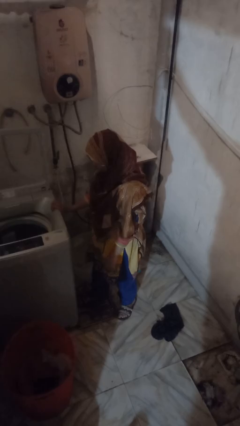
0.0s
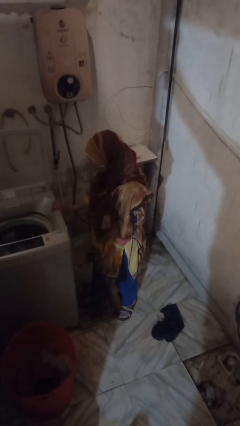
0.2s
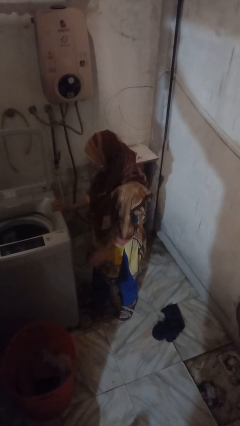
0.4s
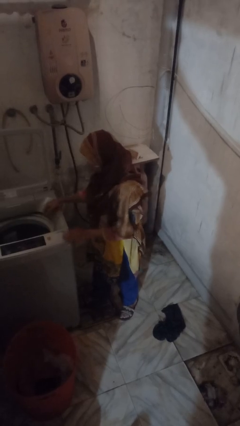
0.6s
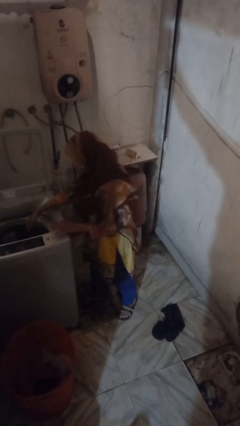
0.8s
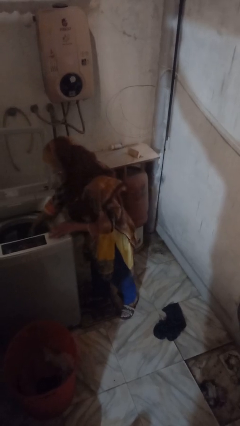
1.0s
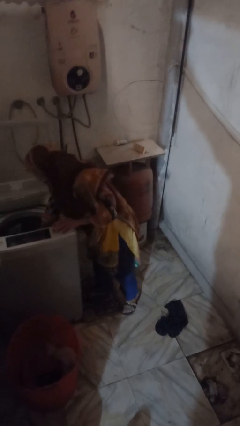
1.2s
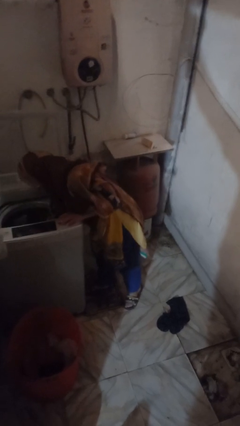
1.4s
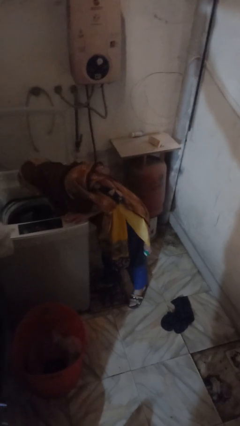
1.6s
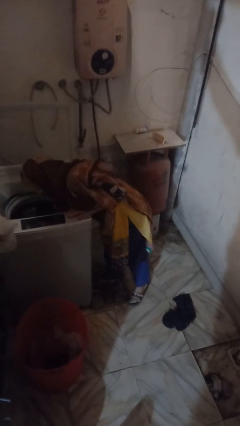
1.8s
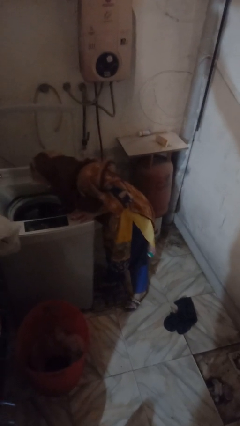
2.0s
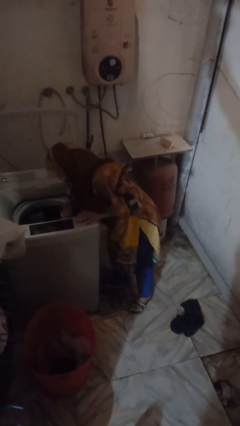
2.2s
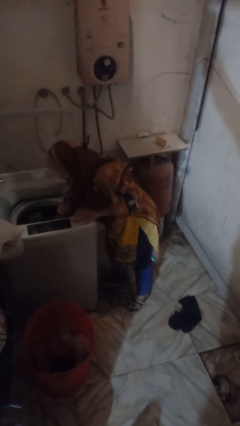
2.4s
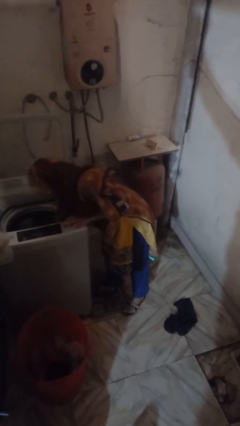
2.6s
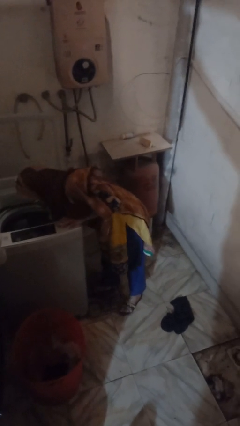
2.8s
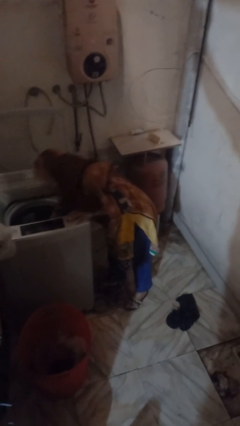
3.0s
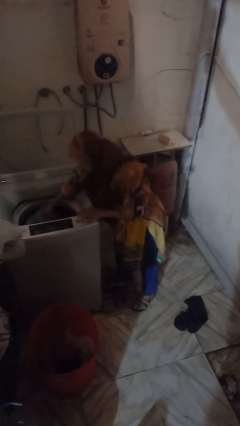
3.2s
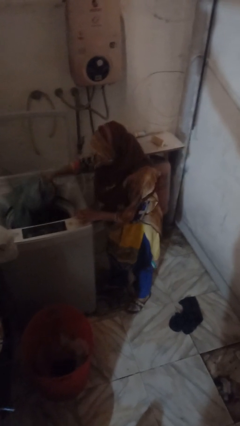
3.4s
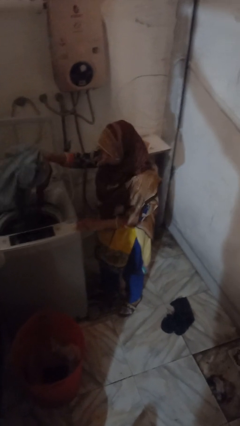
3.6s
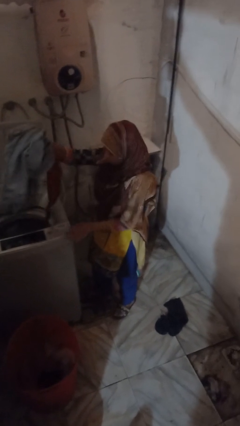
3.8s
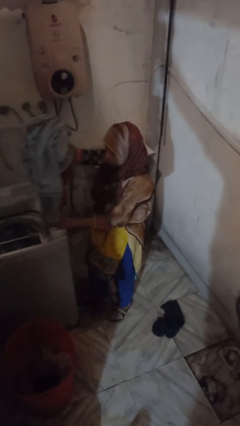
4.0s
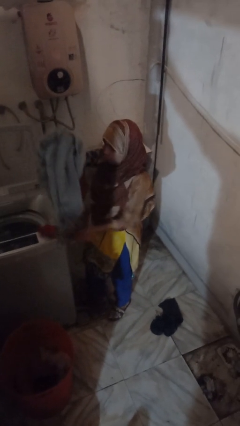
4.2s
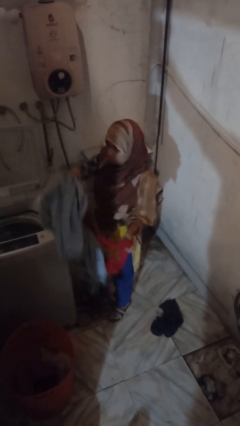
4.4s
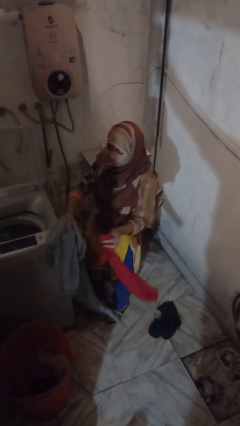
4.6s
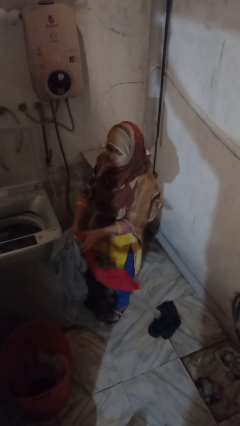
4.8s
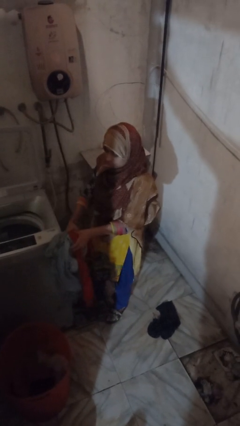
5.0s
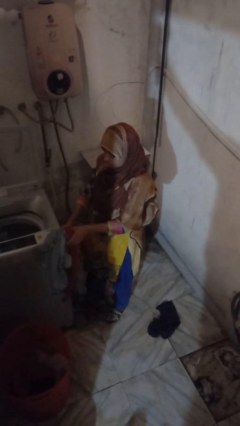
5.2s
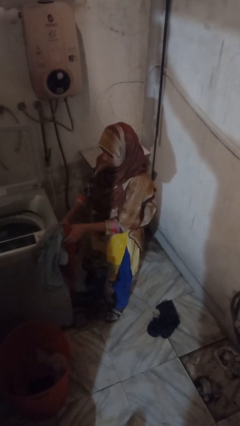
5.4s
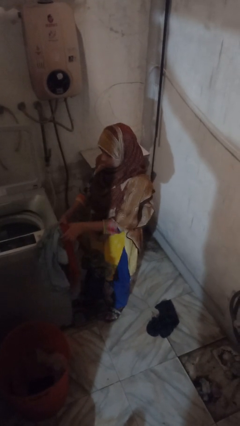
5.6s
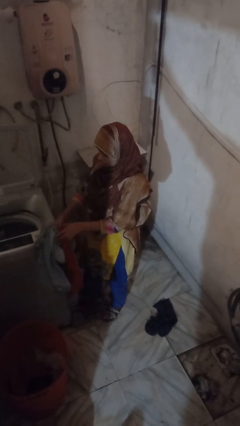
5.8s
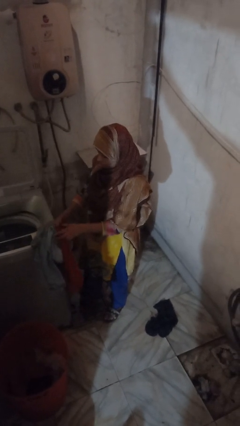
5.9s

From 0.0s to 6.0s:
person unloads dryer

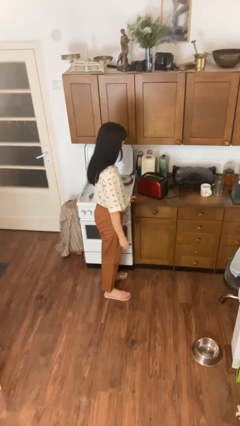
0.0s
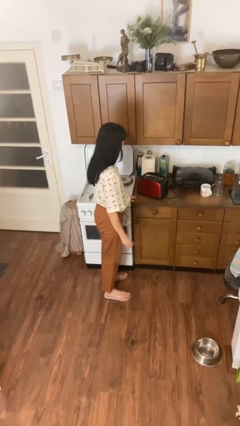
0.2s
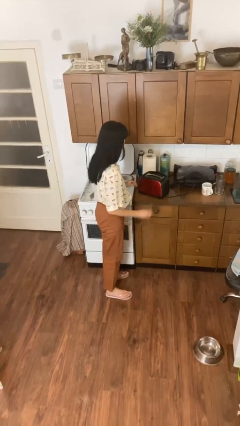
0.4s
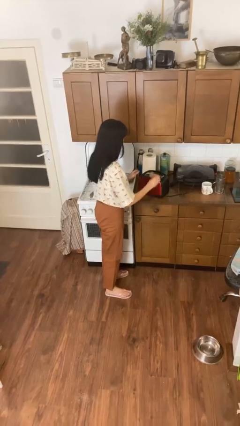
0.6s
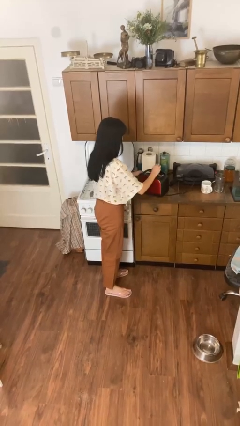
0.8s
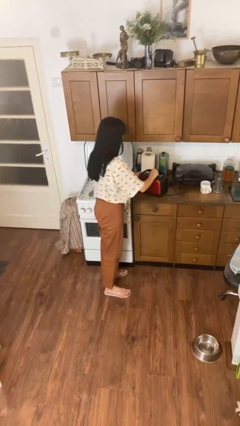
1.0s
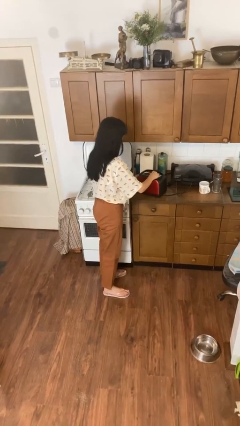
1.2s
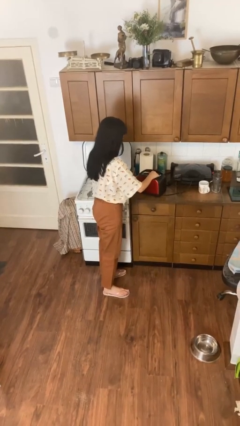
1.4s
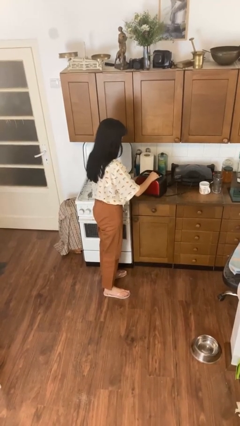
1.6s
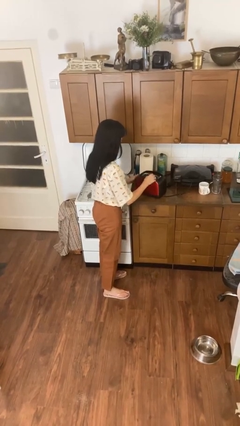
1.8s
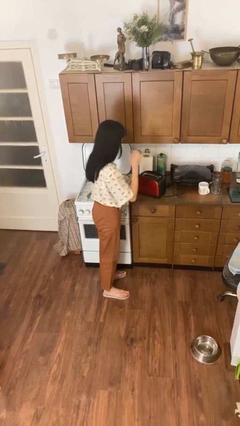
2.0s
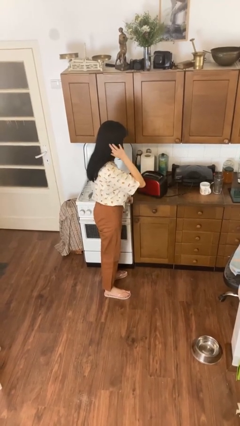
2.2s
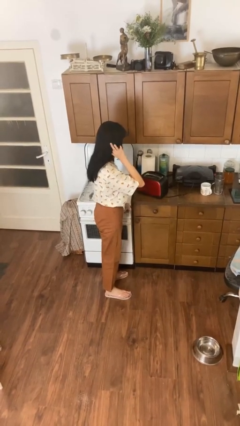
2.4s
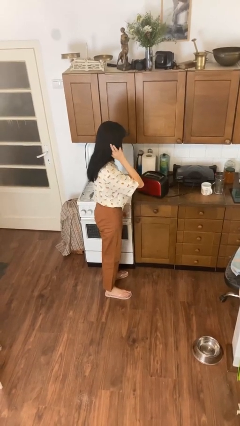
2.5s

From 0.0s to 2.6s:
person puts object into toaster

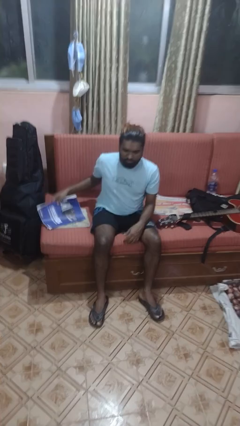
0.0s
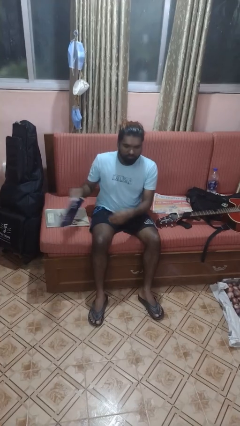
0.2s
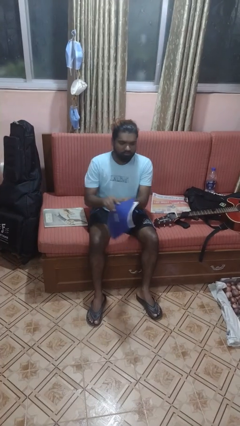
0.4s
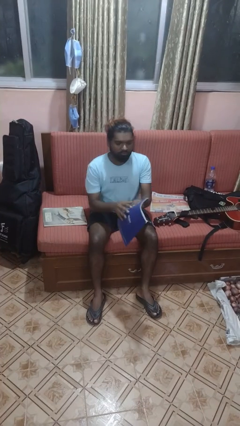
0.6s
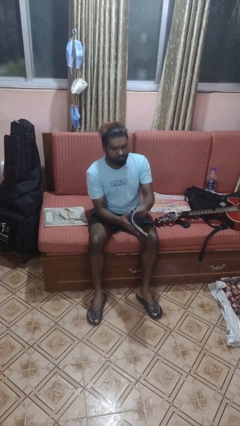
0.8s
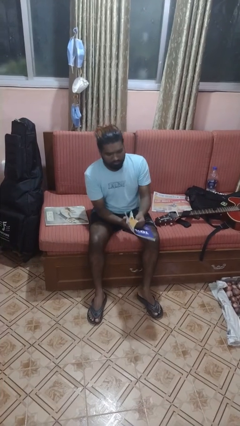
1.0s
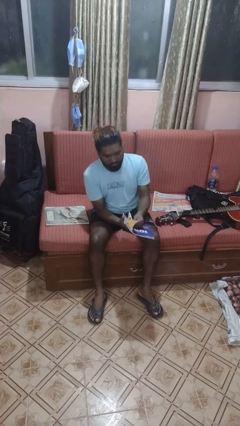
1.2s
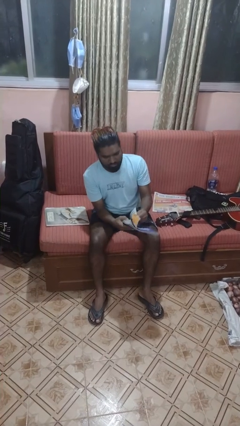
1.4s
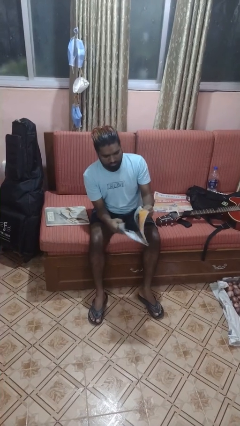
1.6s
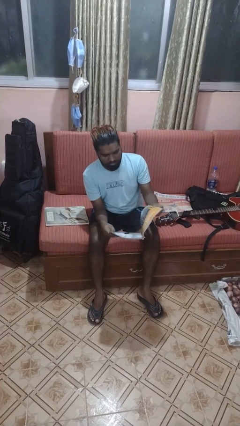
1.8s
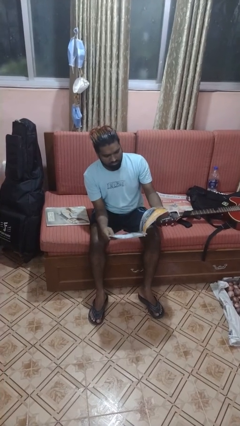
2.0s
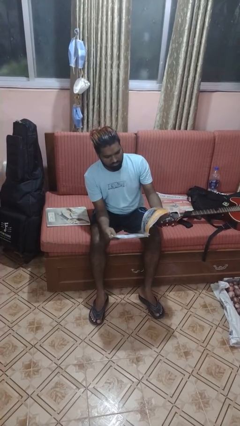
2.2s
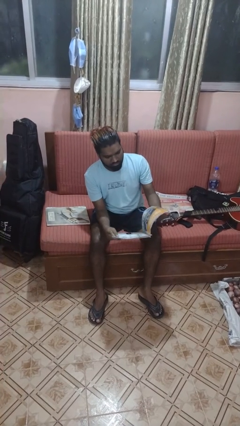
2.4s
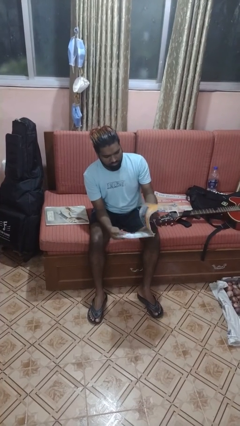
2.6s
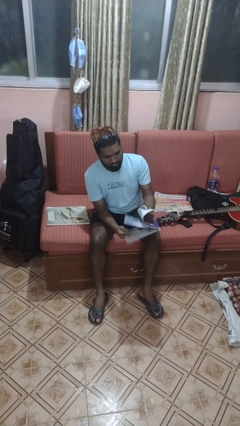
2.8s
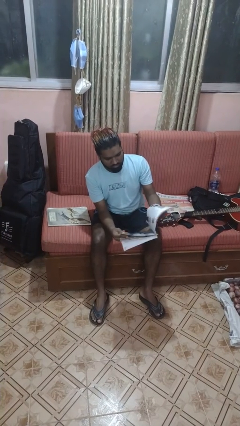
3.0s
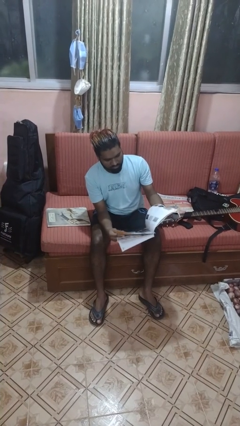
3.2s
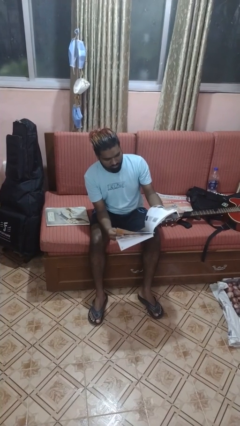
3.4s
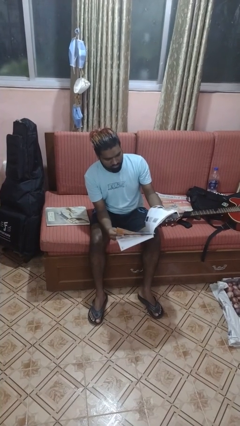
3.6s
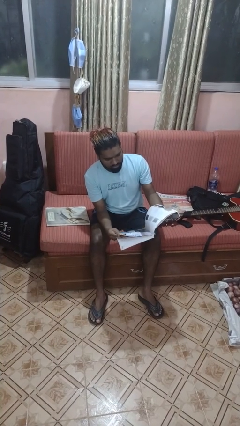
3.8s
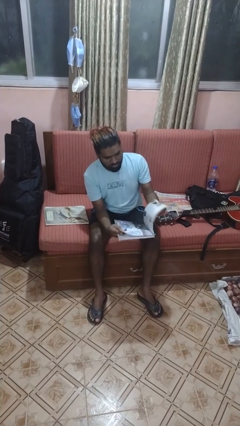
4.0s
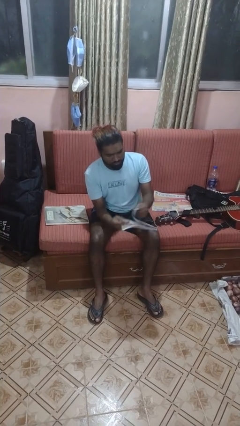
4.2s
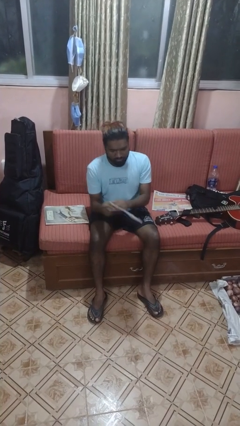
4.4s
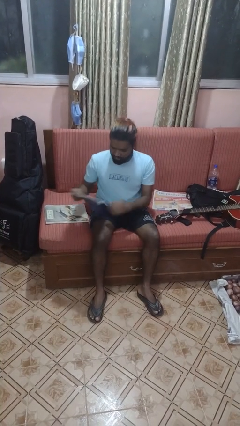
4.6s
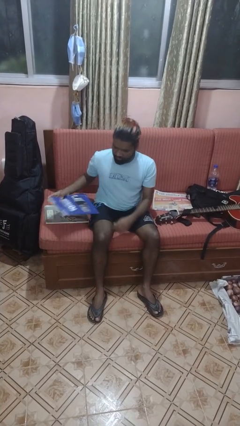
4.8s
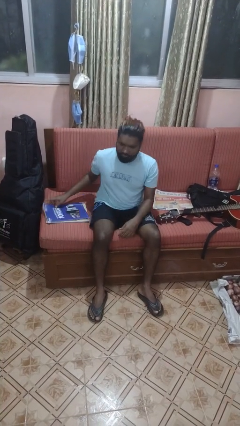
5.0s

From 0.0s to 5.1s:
person reads magazine

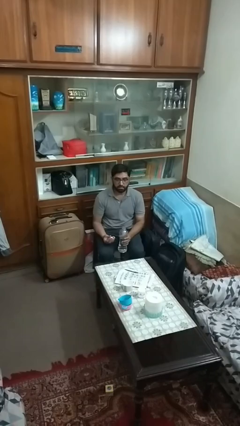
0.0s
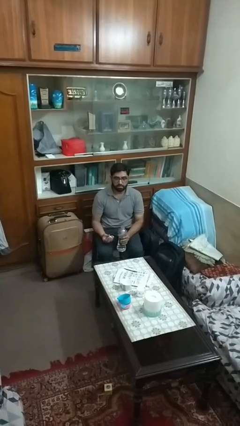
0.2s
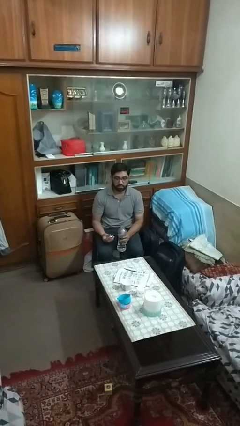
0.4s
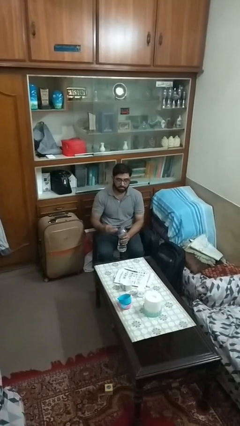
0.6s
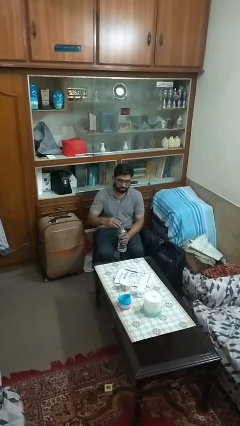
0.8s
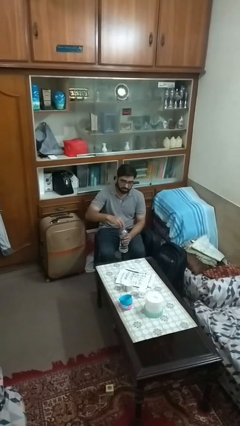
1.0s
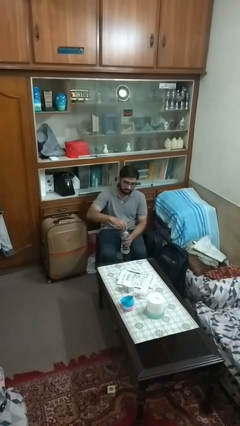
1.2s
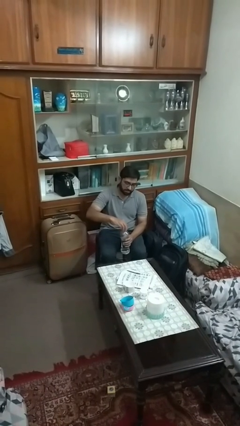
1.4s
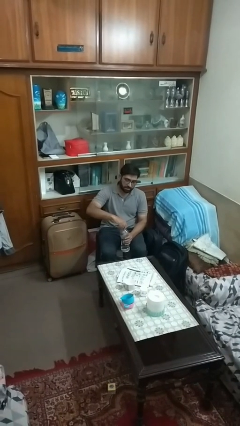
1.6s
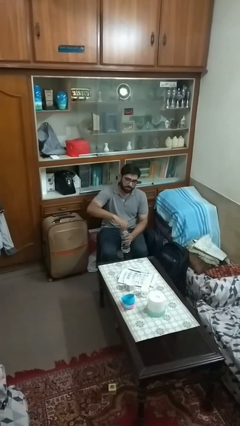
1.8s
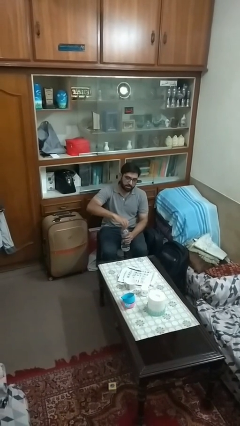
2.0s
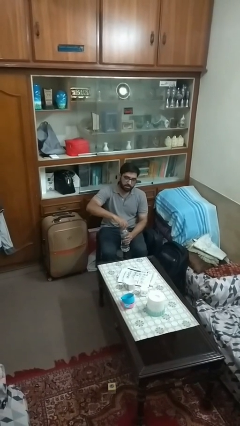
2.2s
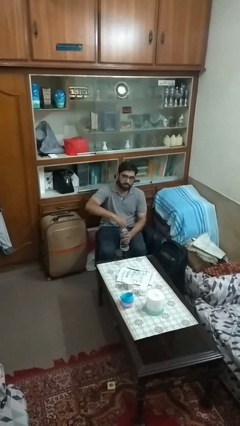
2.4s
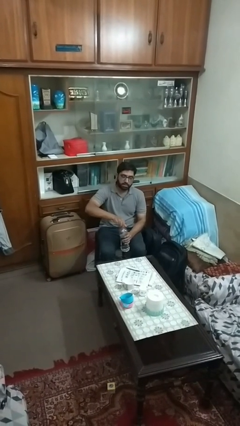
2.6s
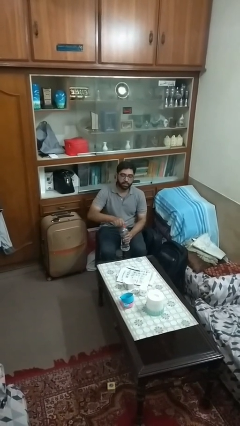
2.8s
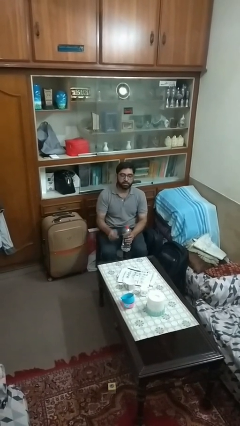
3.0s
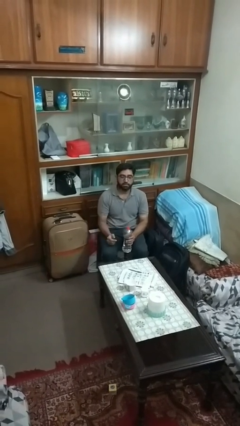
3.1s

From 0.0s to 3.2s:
person screws lid to bottle

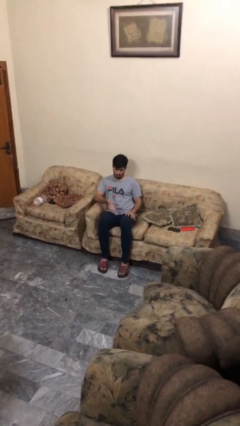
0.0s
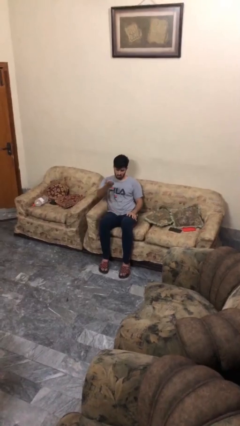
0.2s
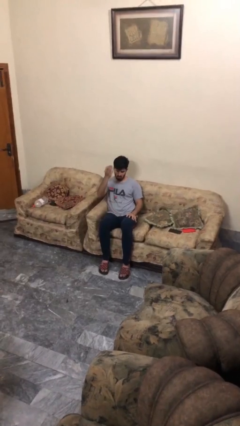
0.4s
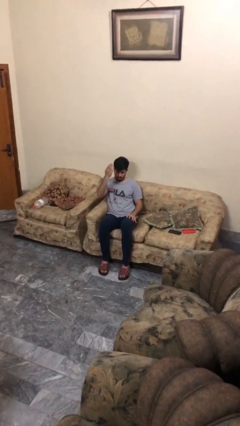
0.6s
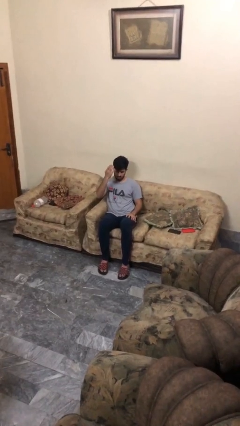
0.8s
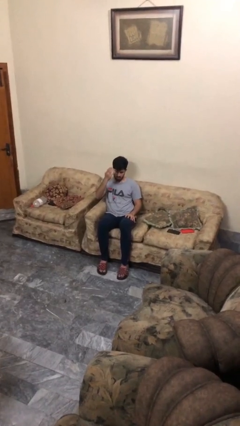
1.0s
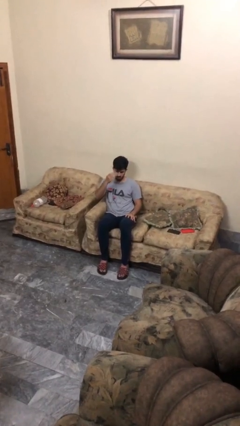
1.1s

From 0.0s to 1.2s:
person gestures swipe up
